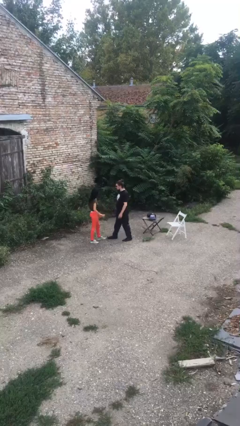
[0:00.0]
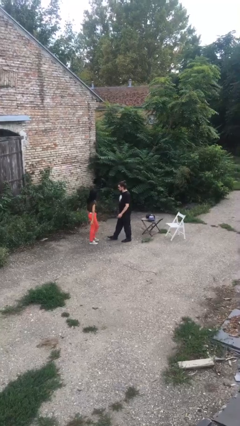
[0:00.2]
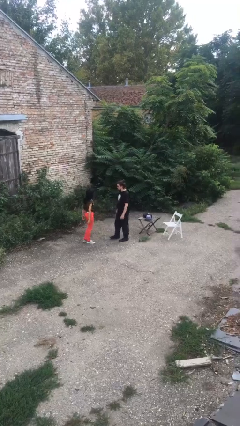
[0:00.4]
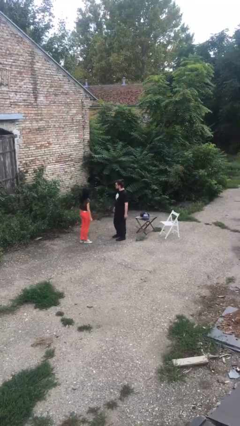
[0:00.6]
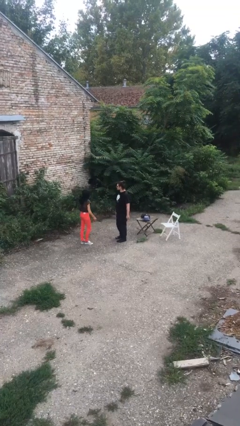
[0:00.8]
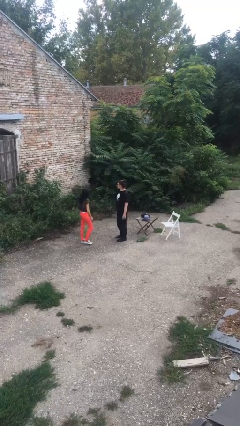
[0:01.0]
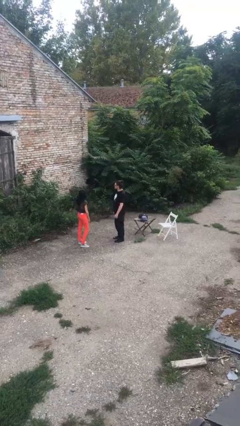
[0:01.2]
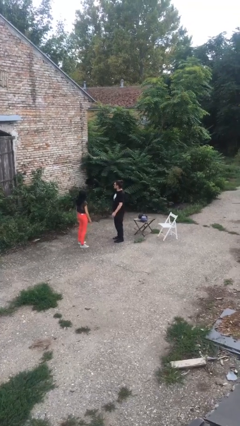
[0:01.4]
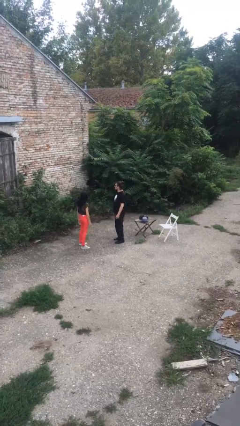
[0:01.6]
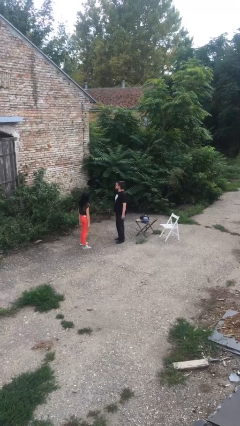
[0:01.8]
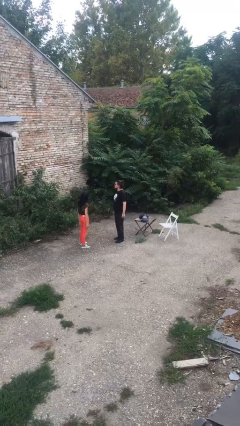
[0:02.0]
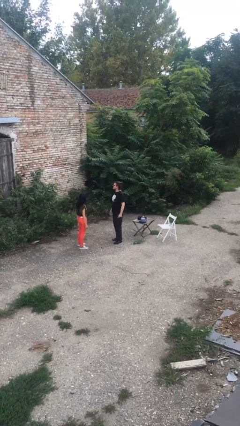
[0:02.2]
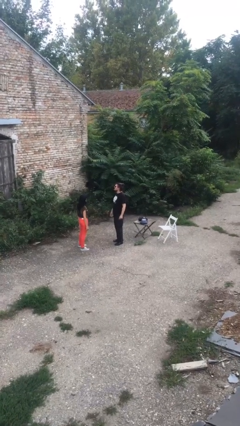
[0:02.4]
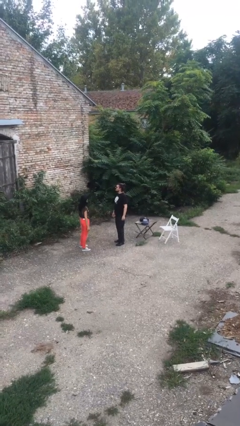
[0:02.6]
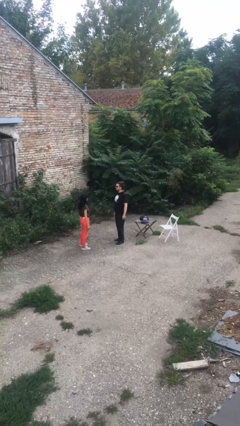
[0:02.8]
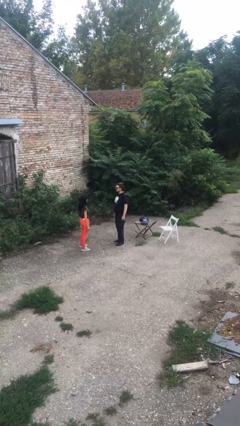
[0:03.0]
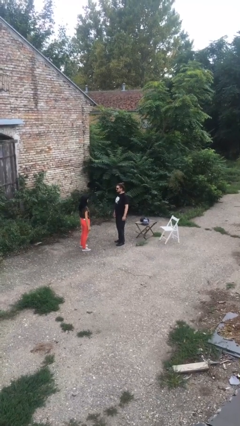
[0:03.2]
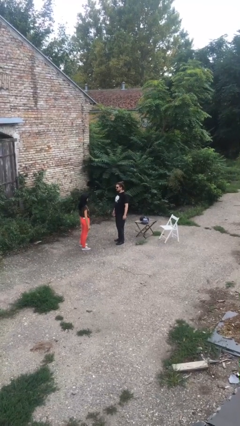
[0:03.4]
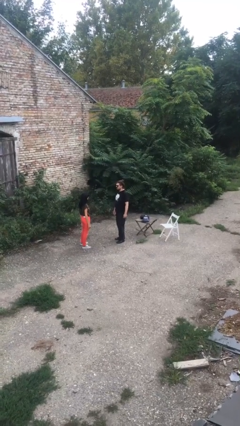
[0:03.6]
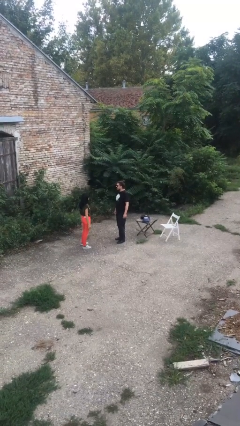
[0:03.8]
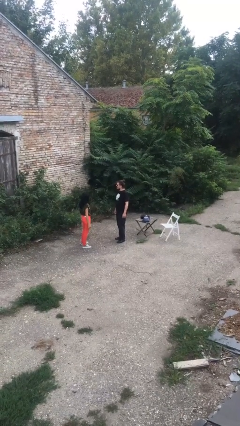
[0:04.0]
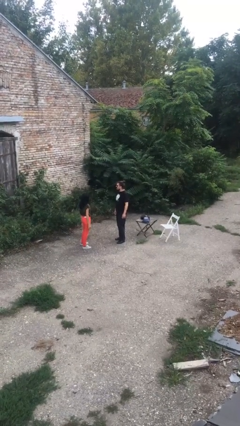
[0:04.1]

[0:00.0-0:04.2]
person talks to person

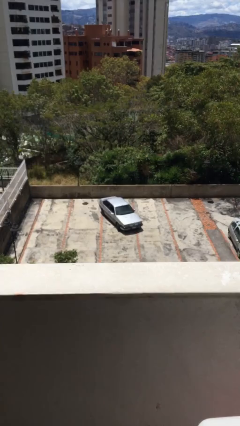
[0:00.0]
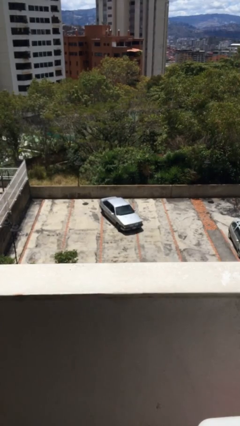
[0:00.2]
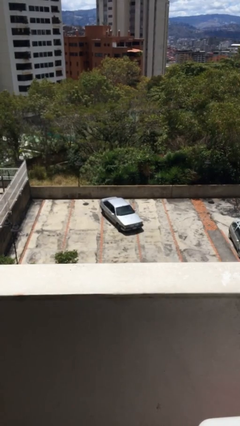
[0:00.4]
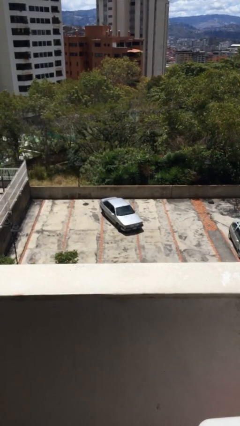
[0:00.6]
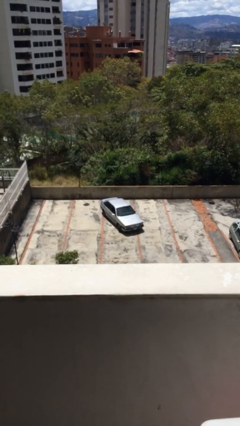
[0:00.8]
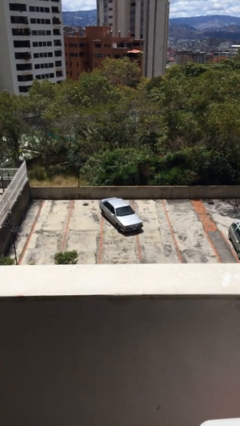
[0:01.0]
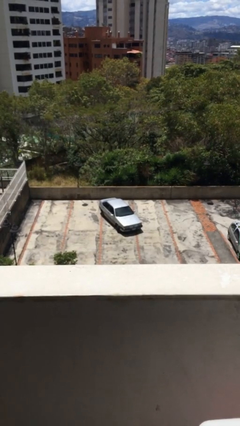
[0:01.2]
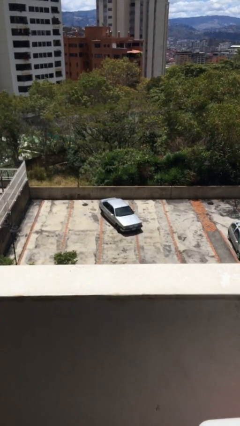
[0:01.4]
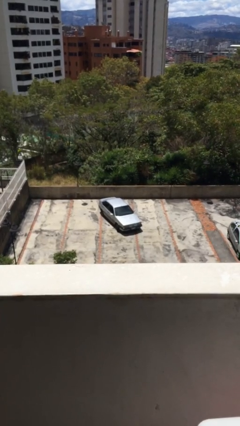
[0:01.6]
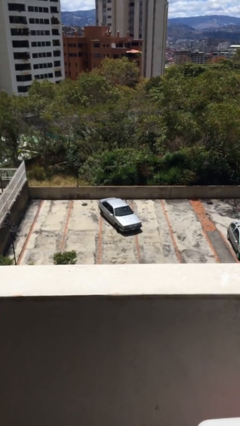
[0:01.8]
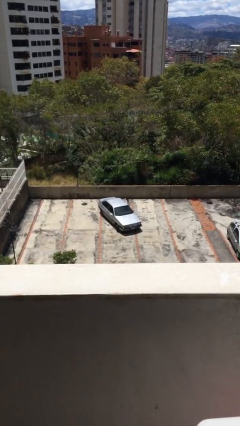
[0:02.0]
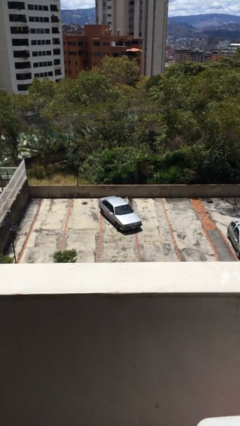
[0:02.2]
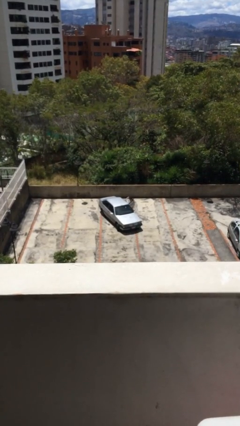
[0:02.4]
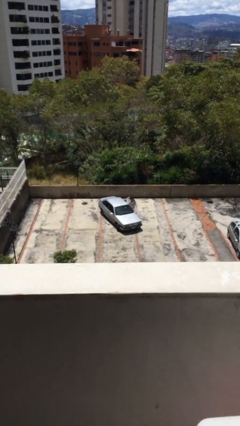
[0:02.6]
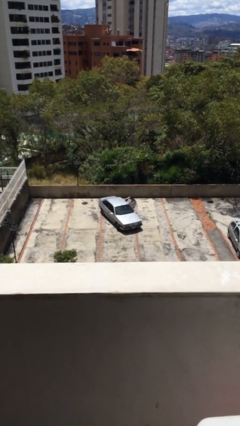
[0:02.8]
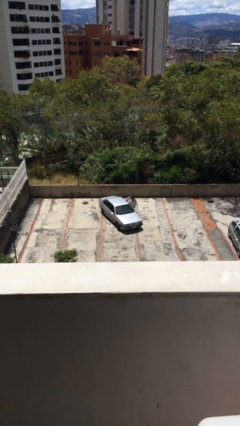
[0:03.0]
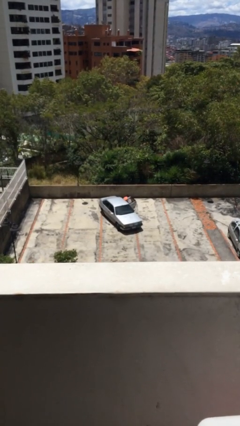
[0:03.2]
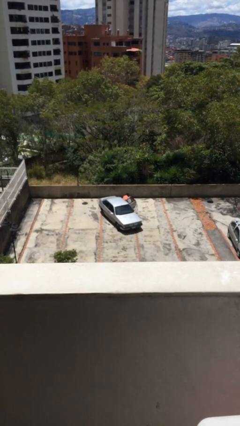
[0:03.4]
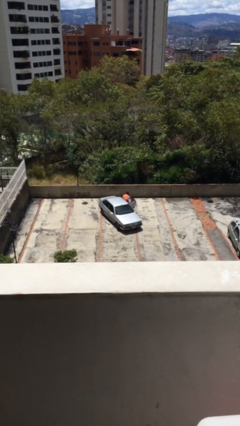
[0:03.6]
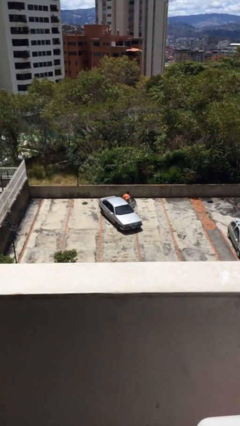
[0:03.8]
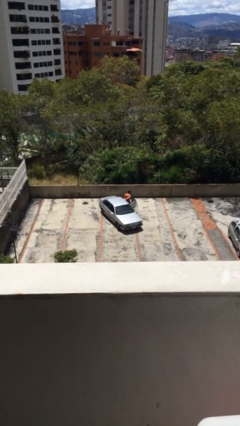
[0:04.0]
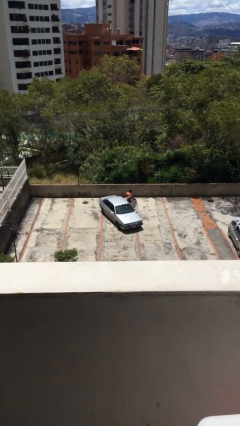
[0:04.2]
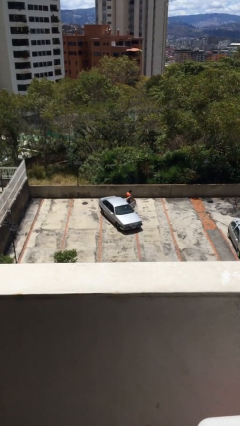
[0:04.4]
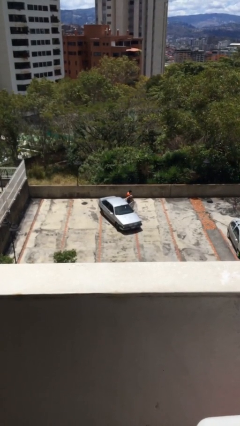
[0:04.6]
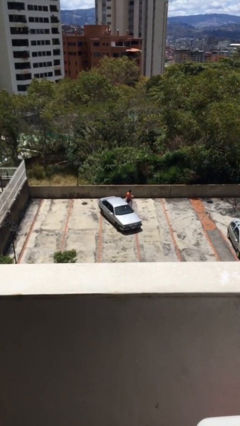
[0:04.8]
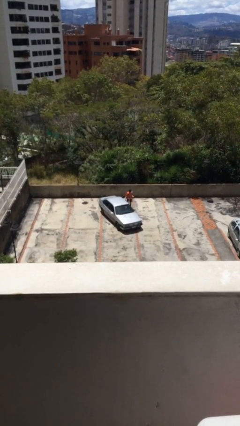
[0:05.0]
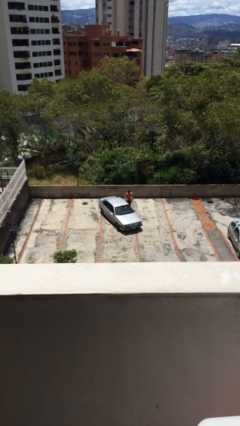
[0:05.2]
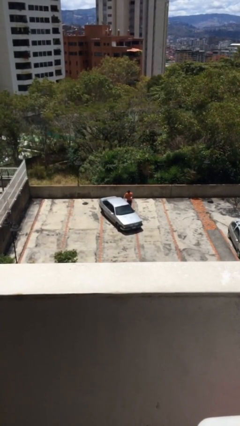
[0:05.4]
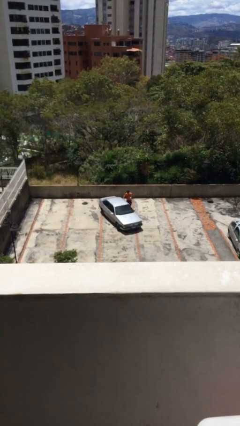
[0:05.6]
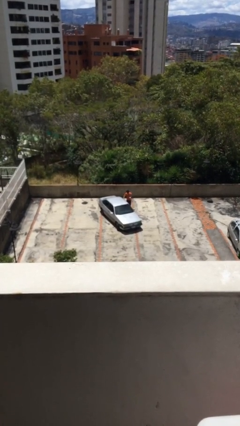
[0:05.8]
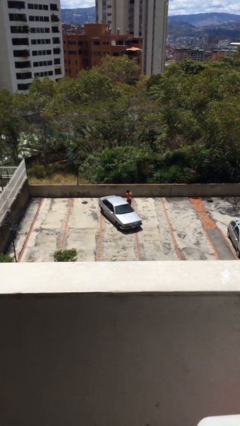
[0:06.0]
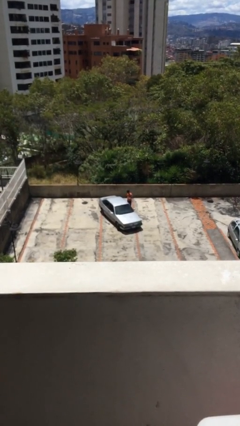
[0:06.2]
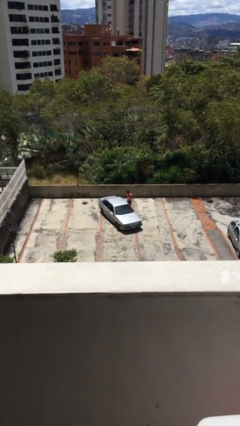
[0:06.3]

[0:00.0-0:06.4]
car drops off person

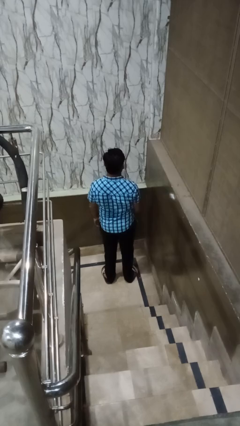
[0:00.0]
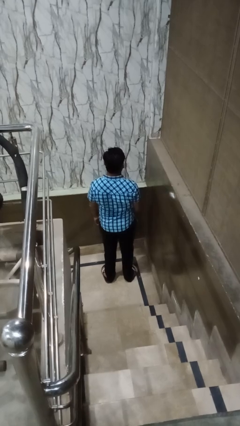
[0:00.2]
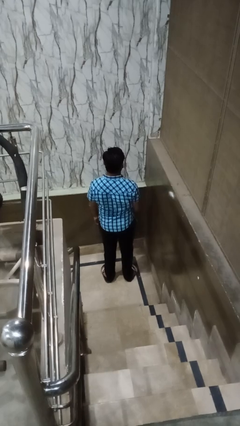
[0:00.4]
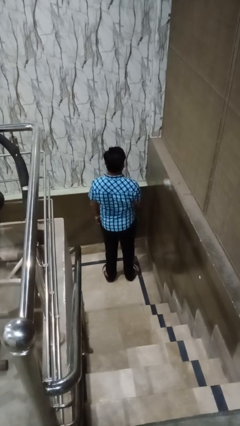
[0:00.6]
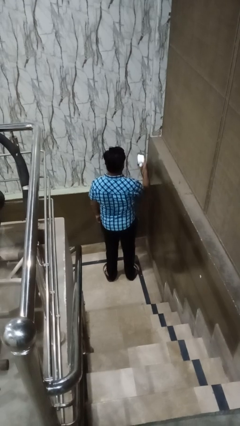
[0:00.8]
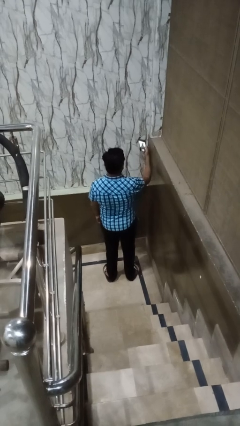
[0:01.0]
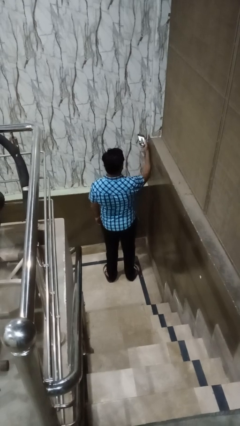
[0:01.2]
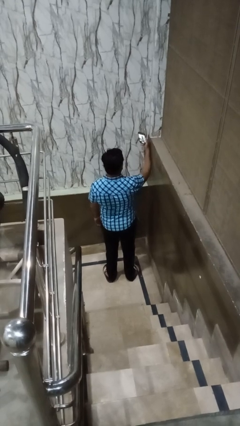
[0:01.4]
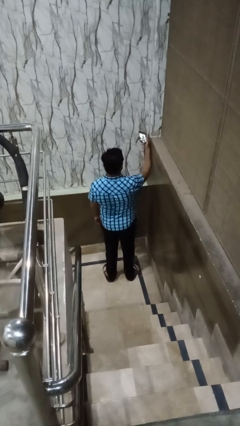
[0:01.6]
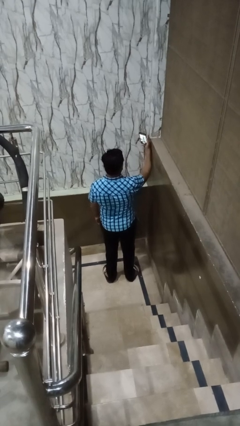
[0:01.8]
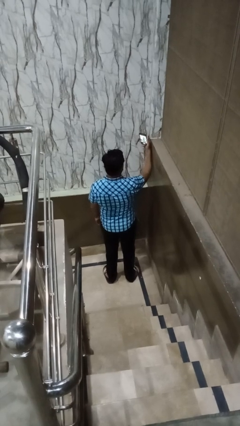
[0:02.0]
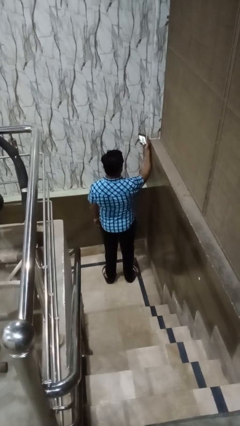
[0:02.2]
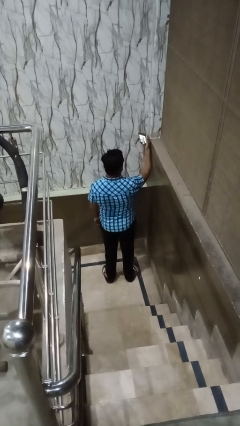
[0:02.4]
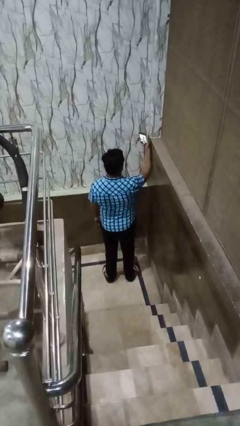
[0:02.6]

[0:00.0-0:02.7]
person takes selfie

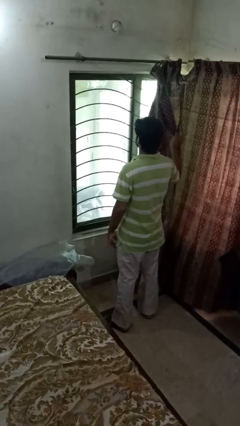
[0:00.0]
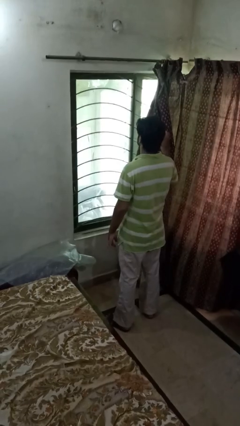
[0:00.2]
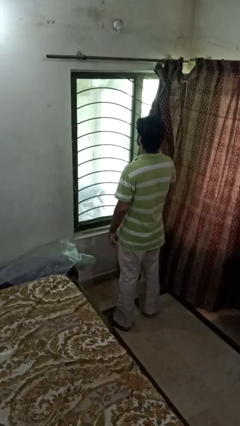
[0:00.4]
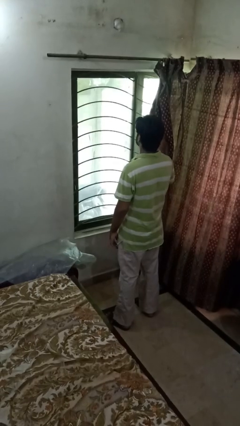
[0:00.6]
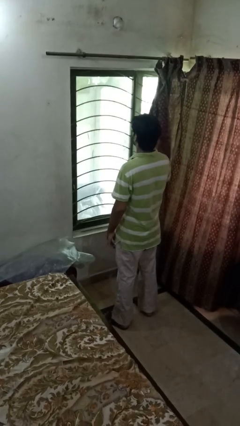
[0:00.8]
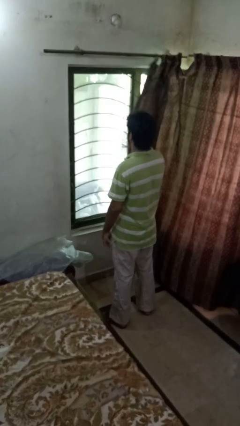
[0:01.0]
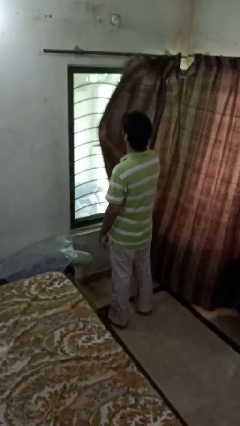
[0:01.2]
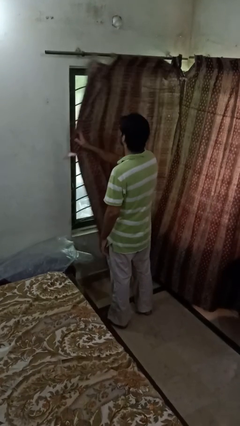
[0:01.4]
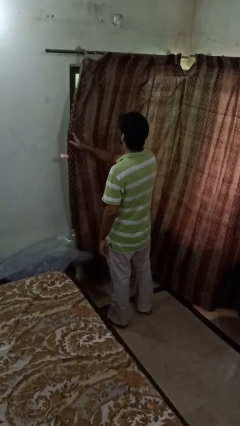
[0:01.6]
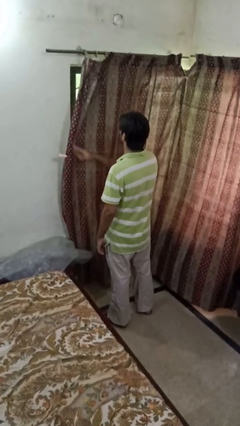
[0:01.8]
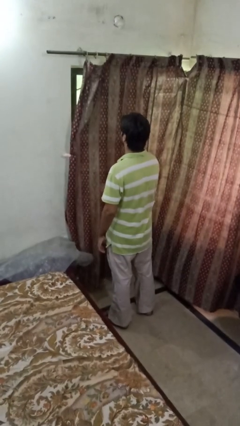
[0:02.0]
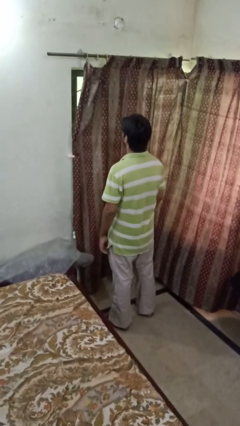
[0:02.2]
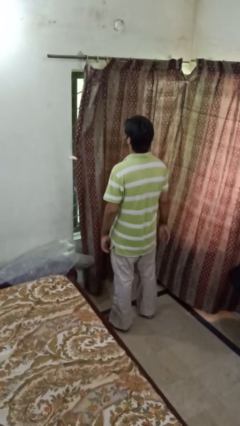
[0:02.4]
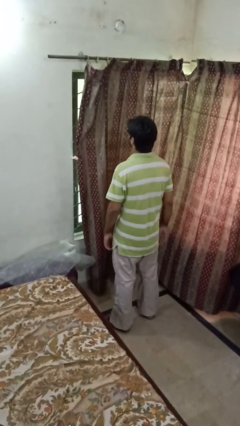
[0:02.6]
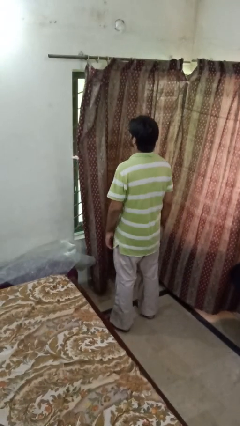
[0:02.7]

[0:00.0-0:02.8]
person closes curtains

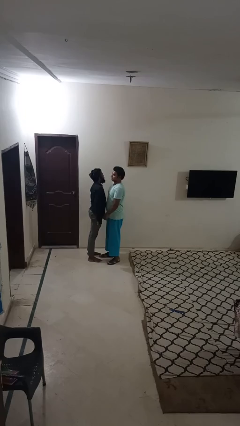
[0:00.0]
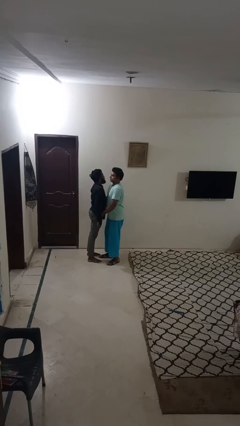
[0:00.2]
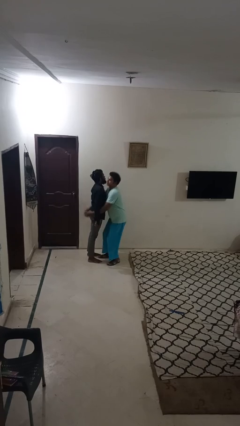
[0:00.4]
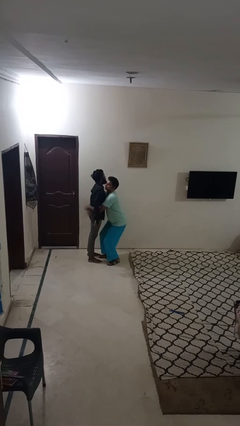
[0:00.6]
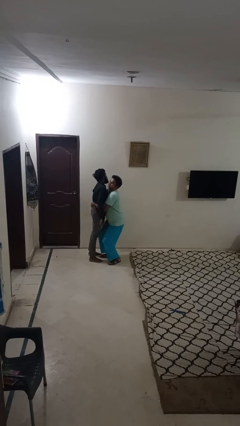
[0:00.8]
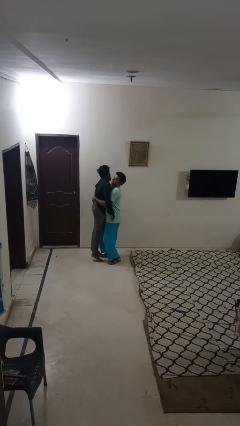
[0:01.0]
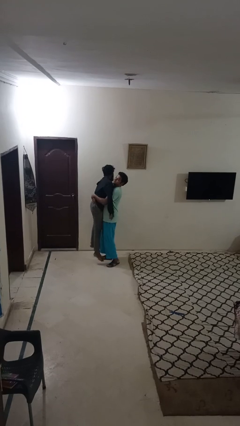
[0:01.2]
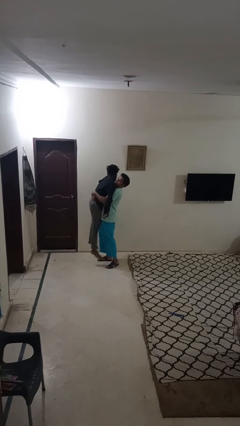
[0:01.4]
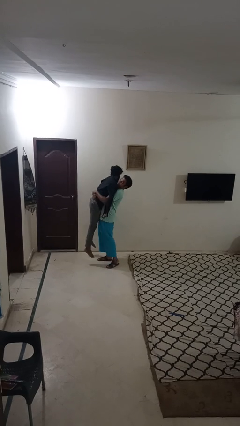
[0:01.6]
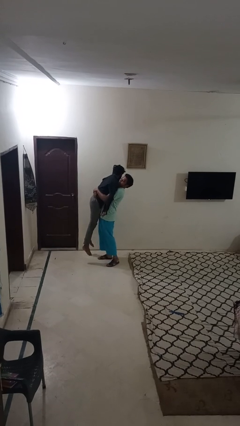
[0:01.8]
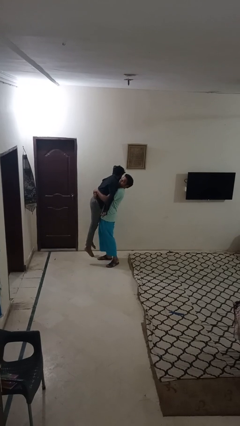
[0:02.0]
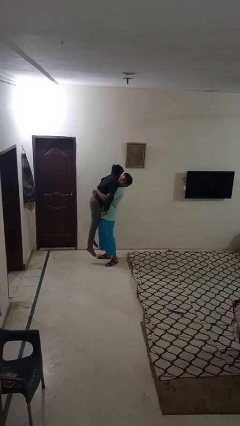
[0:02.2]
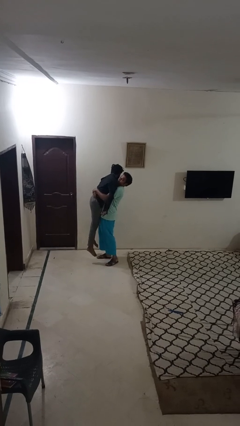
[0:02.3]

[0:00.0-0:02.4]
person picks up person
